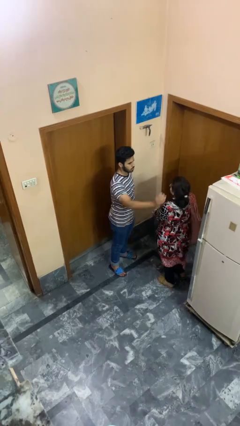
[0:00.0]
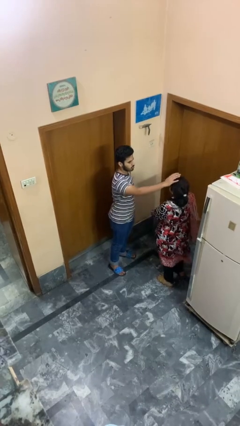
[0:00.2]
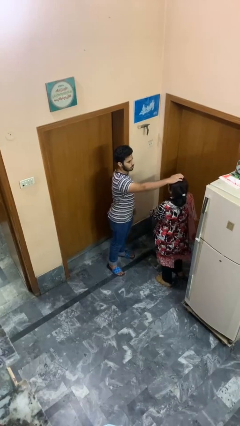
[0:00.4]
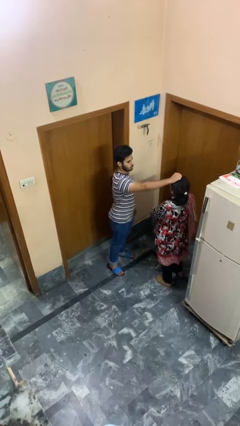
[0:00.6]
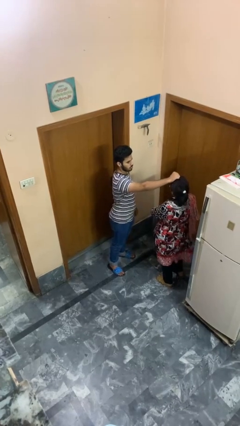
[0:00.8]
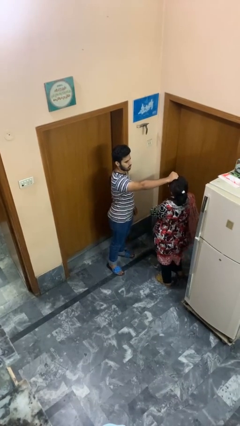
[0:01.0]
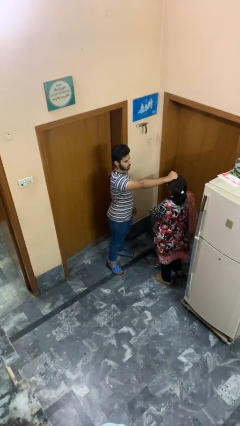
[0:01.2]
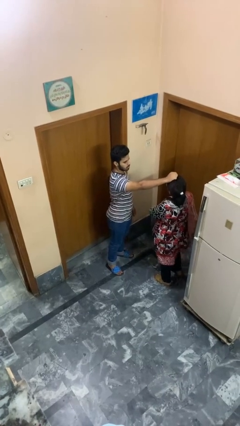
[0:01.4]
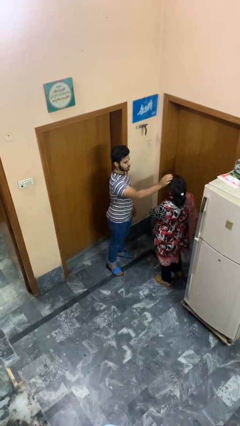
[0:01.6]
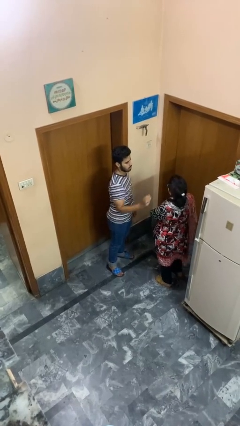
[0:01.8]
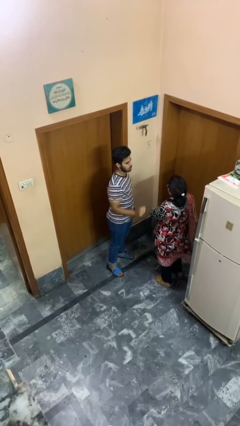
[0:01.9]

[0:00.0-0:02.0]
person grabs person by hair

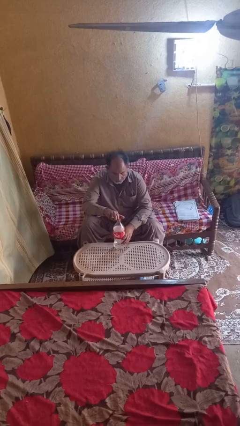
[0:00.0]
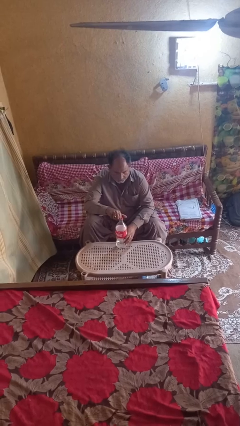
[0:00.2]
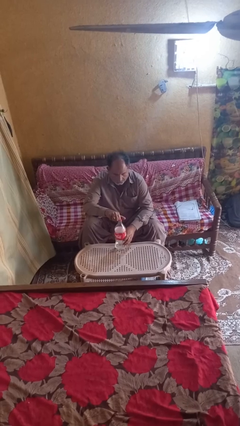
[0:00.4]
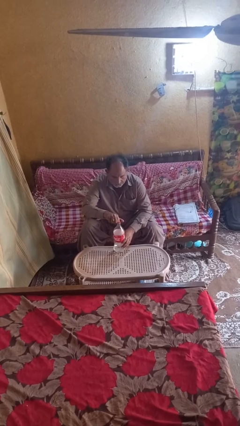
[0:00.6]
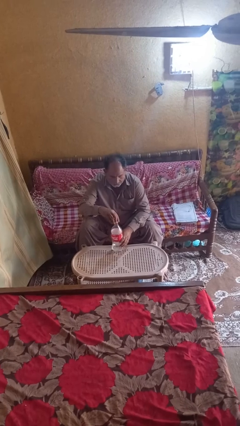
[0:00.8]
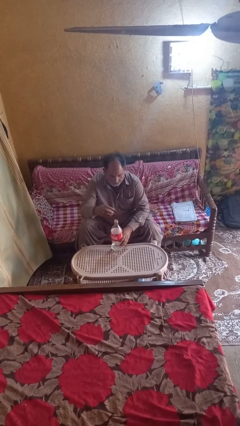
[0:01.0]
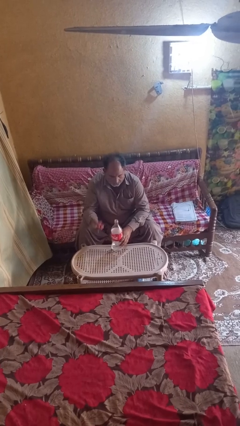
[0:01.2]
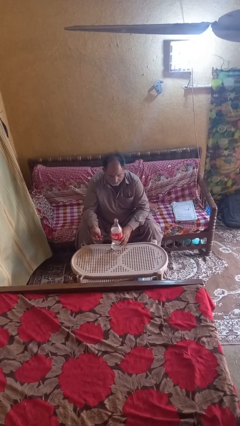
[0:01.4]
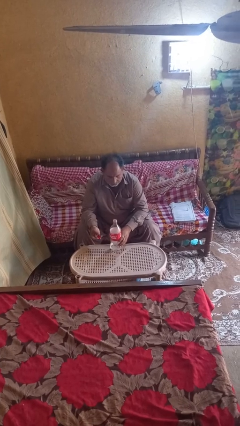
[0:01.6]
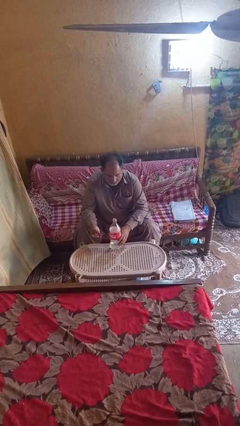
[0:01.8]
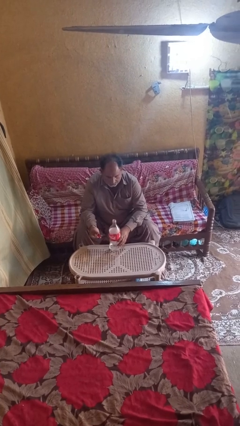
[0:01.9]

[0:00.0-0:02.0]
person unscrews lid from bottle

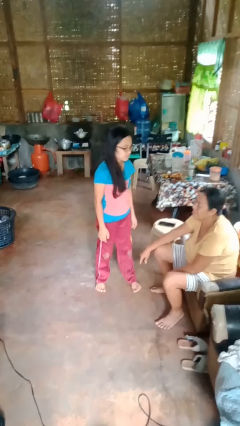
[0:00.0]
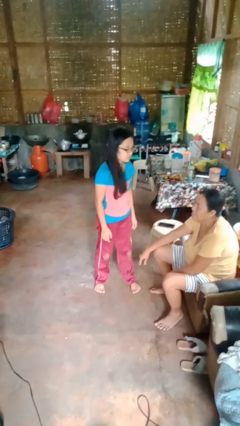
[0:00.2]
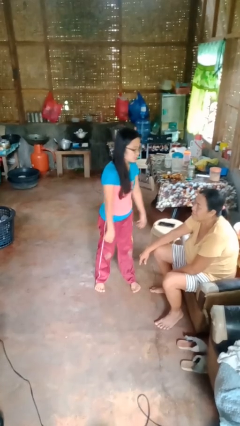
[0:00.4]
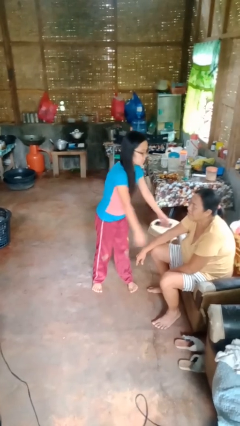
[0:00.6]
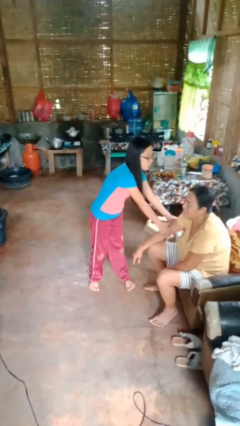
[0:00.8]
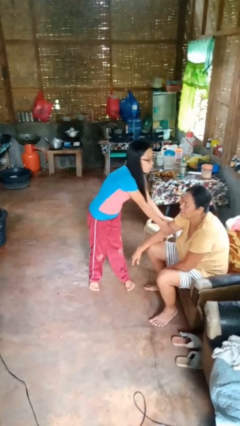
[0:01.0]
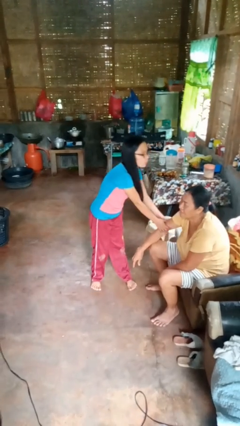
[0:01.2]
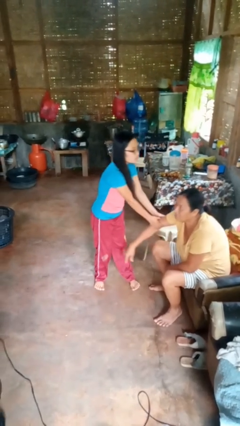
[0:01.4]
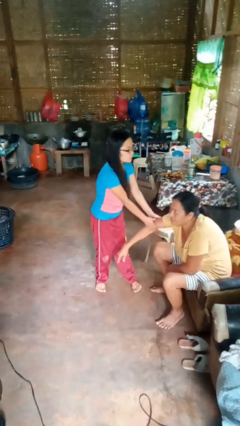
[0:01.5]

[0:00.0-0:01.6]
person grabs person by bicep

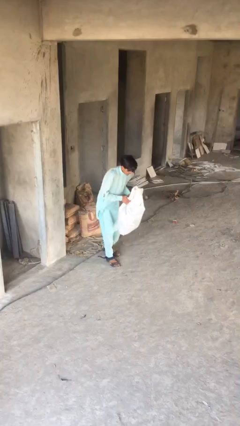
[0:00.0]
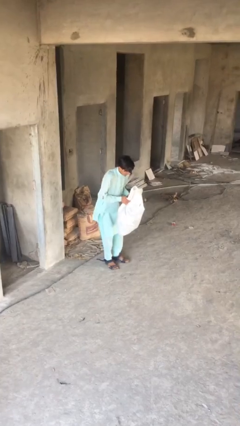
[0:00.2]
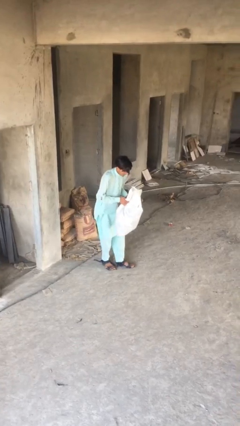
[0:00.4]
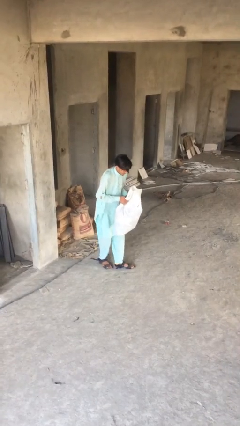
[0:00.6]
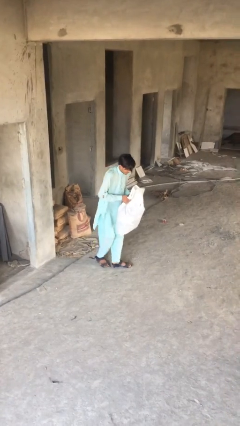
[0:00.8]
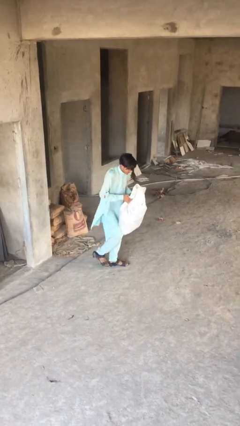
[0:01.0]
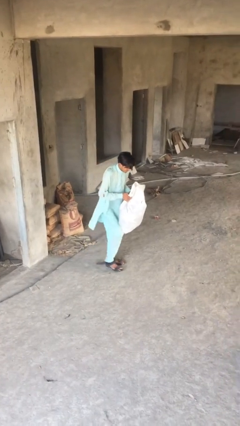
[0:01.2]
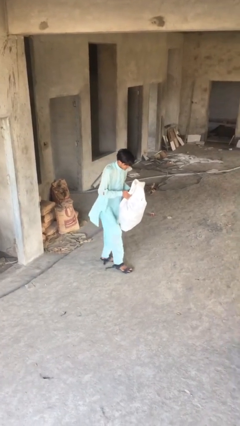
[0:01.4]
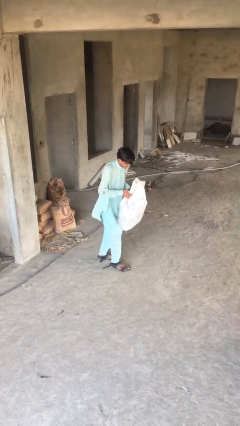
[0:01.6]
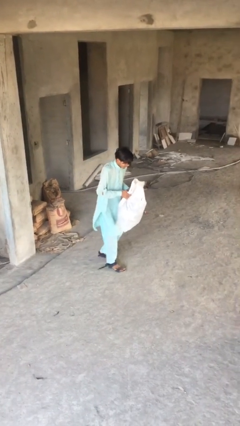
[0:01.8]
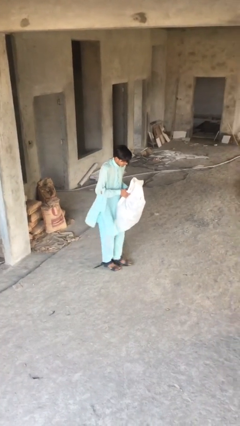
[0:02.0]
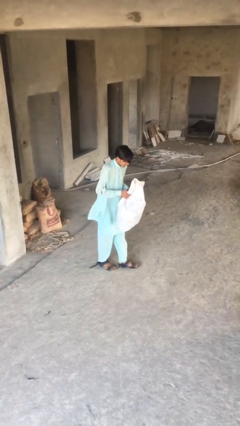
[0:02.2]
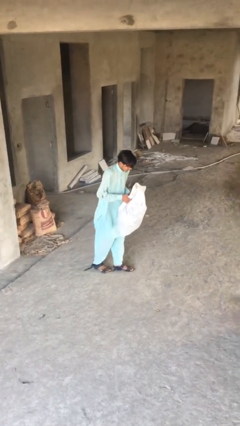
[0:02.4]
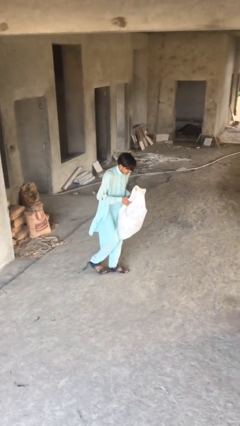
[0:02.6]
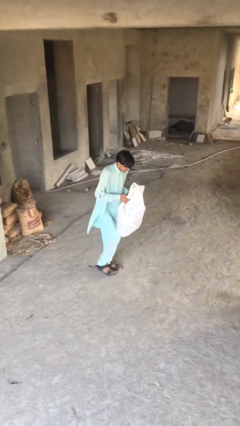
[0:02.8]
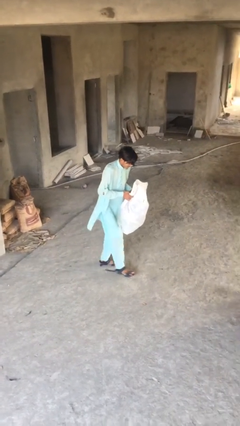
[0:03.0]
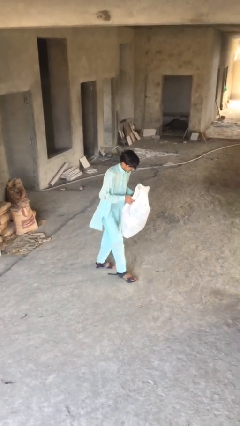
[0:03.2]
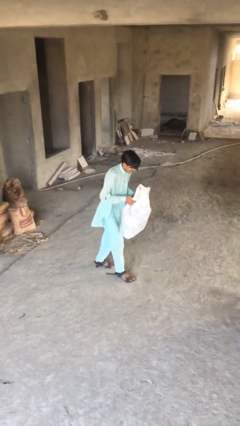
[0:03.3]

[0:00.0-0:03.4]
person carries heavy object

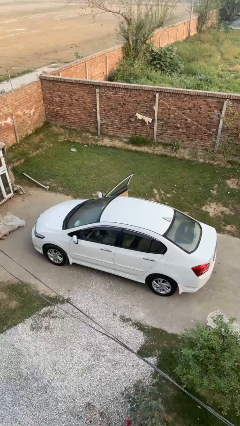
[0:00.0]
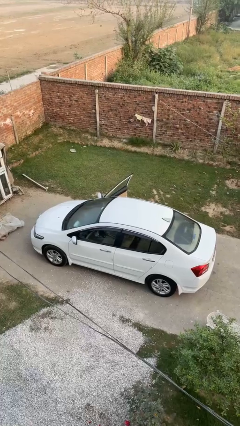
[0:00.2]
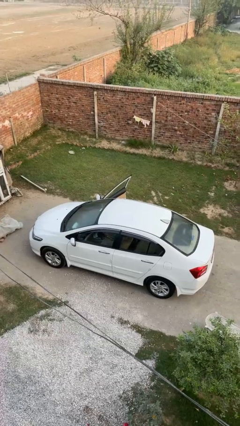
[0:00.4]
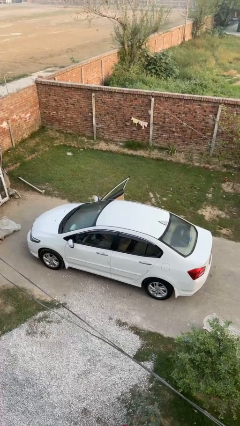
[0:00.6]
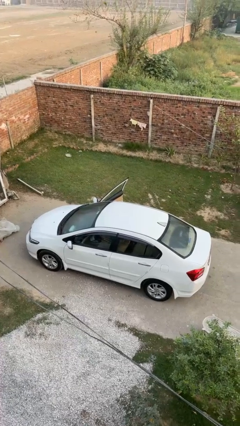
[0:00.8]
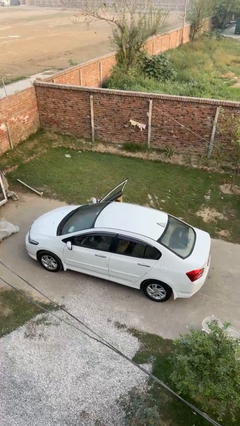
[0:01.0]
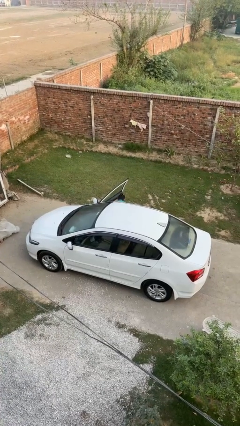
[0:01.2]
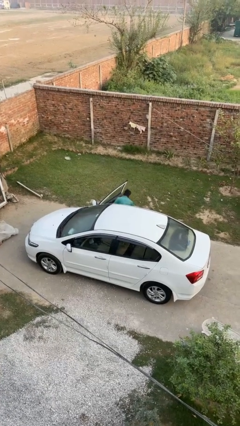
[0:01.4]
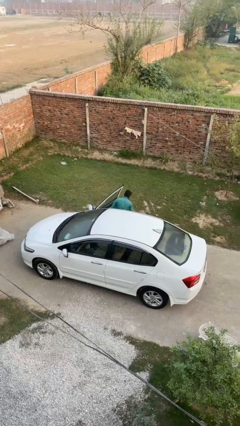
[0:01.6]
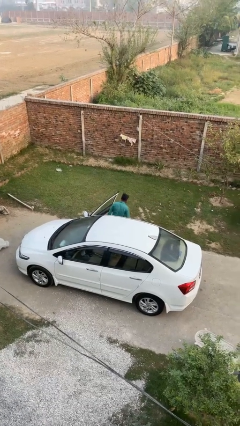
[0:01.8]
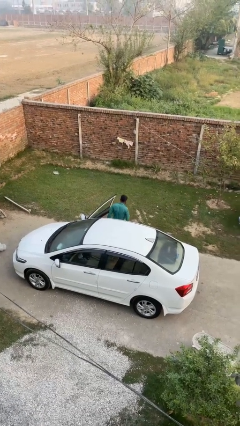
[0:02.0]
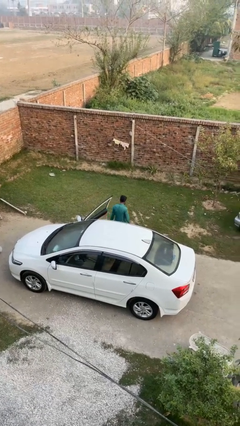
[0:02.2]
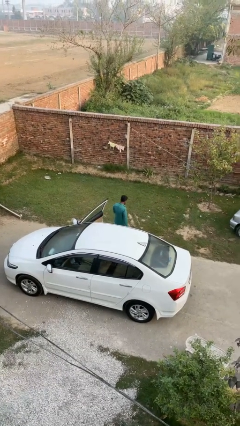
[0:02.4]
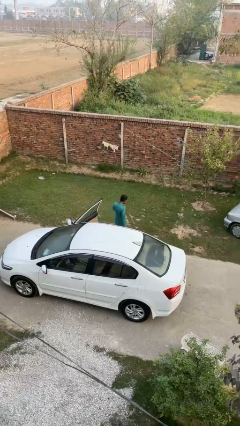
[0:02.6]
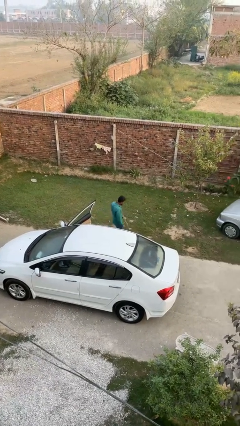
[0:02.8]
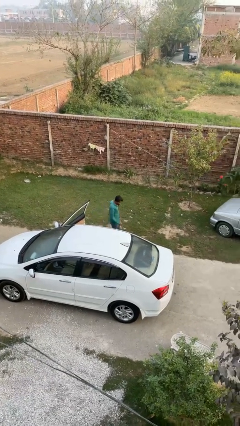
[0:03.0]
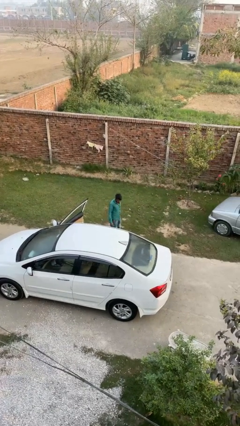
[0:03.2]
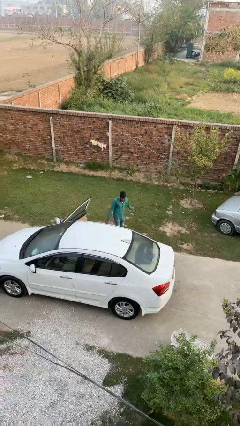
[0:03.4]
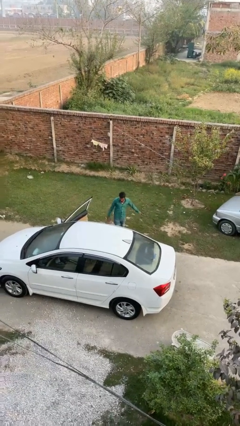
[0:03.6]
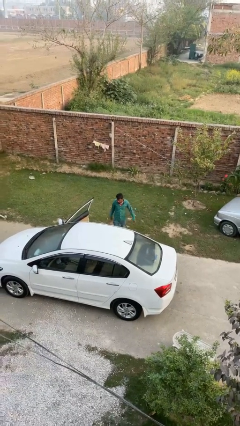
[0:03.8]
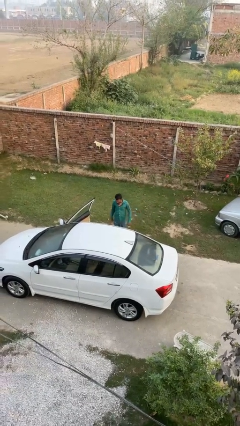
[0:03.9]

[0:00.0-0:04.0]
person exits car

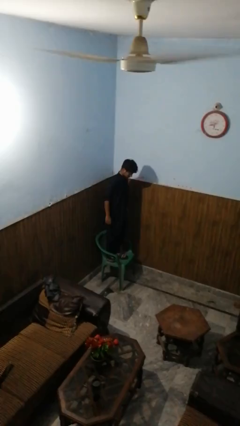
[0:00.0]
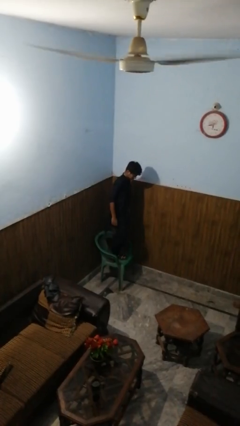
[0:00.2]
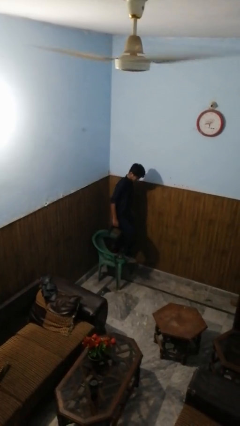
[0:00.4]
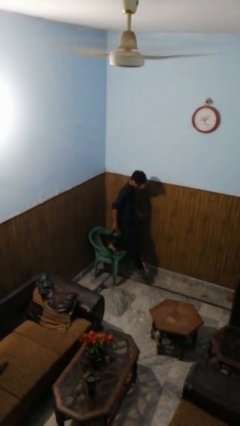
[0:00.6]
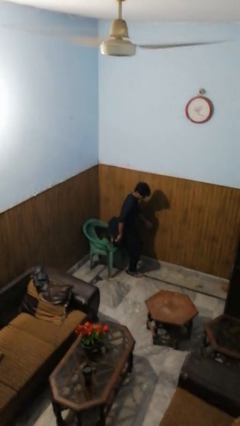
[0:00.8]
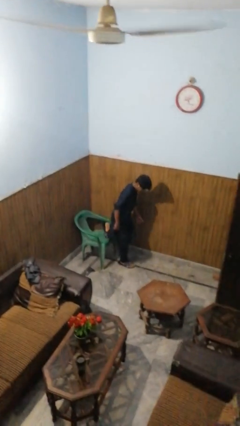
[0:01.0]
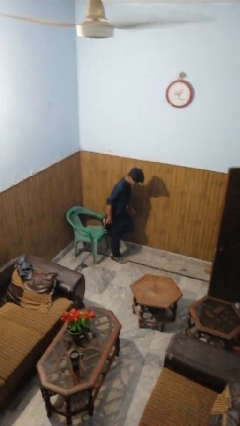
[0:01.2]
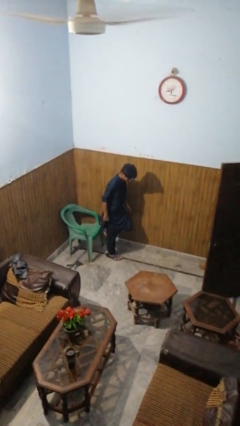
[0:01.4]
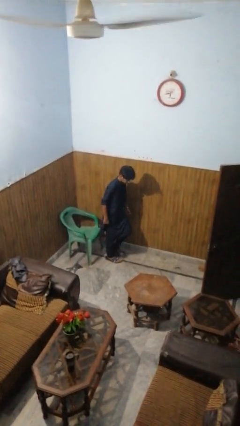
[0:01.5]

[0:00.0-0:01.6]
person climbs off chair

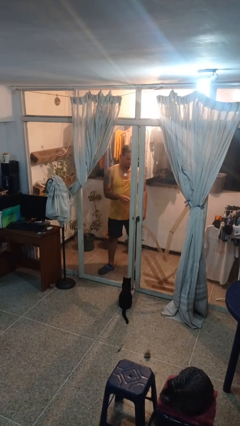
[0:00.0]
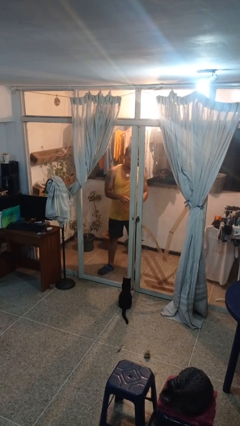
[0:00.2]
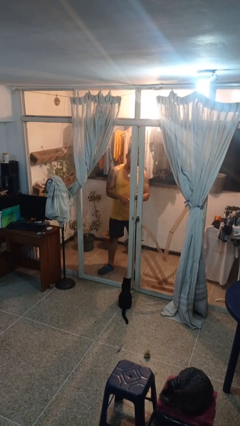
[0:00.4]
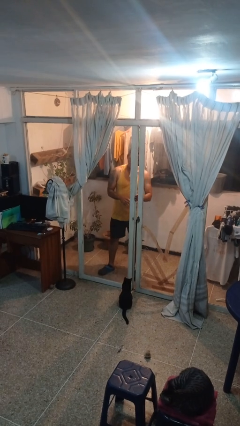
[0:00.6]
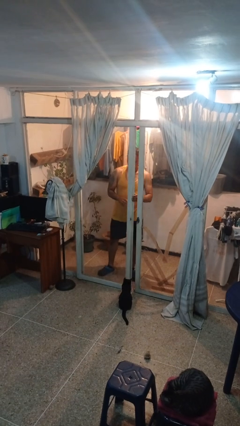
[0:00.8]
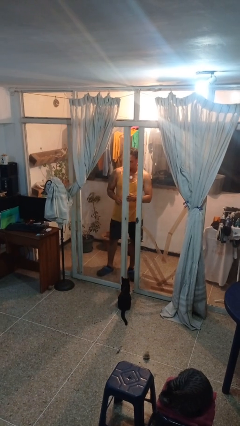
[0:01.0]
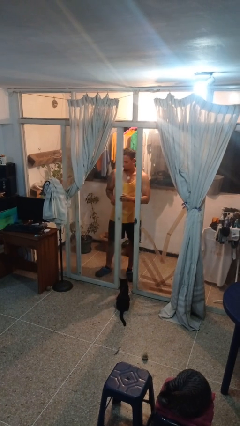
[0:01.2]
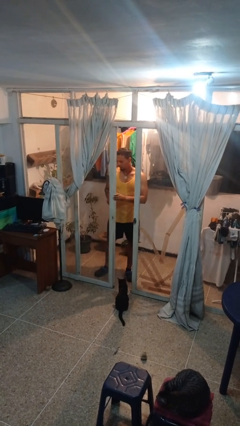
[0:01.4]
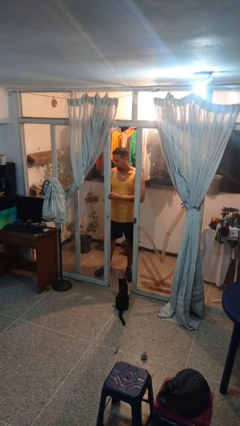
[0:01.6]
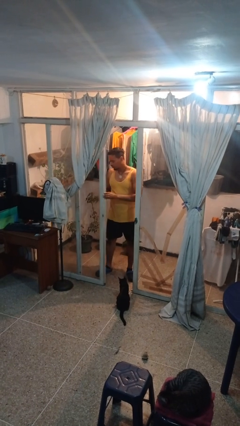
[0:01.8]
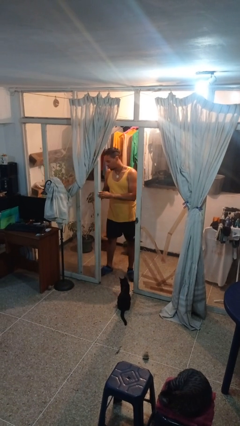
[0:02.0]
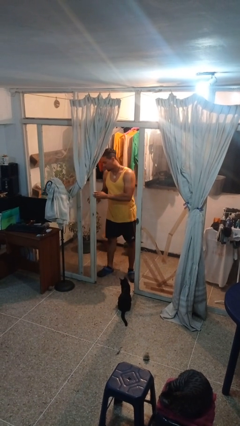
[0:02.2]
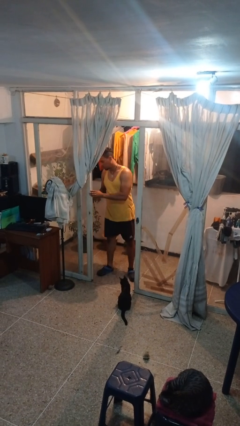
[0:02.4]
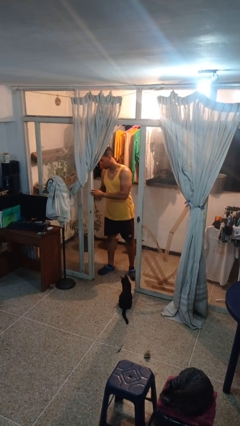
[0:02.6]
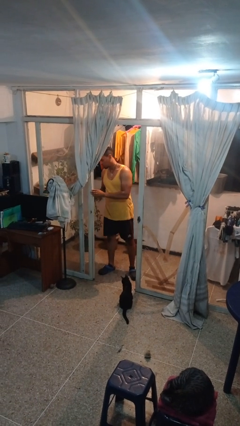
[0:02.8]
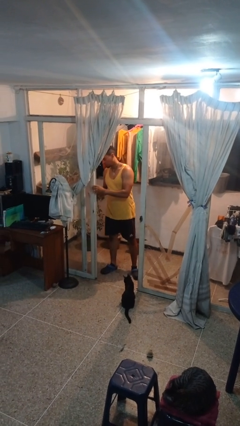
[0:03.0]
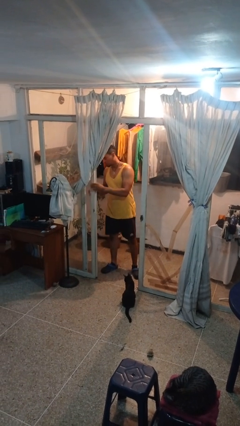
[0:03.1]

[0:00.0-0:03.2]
person opens sliding door
